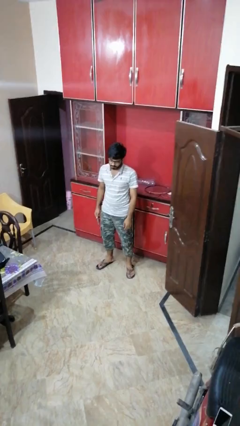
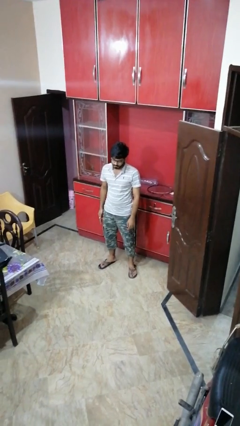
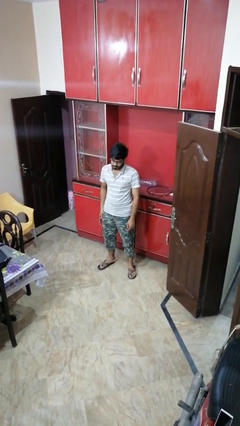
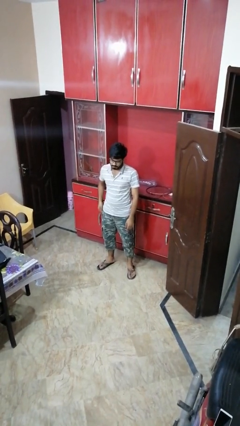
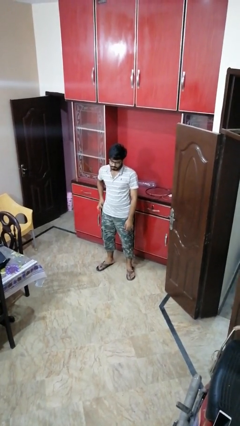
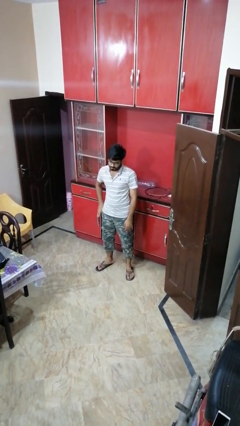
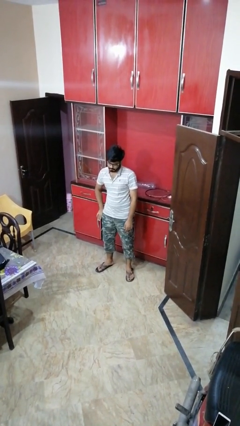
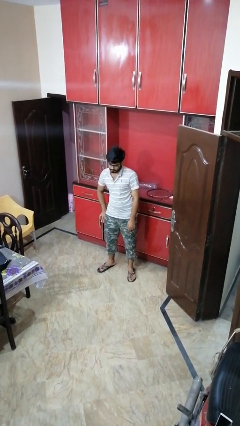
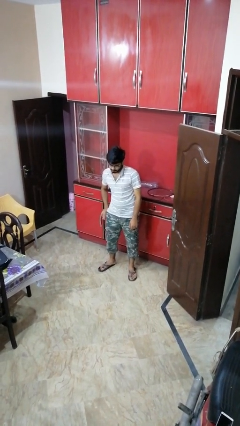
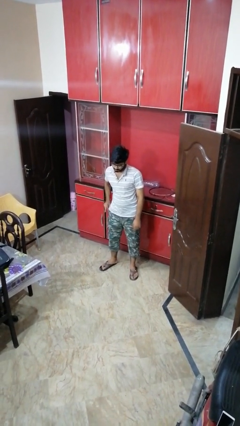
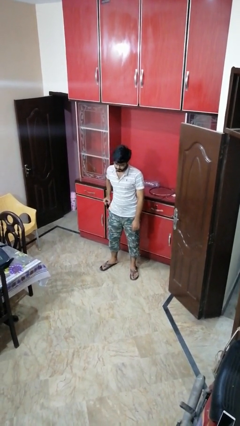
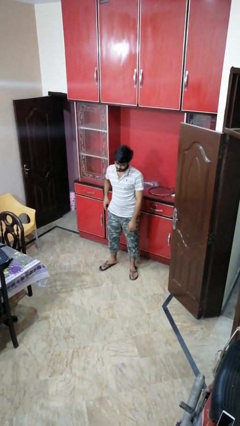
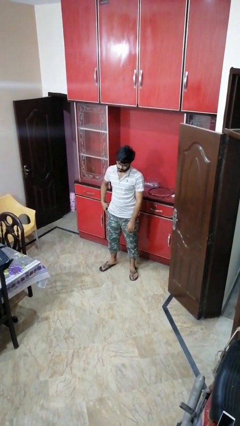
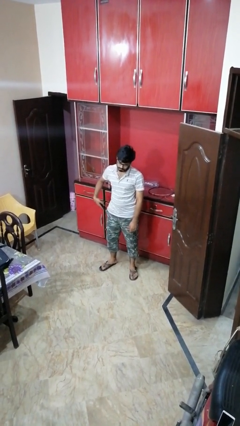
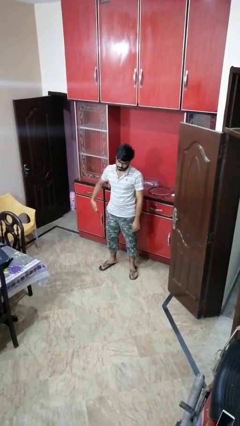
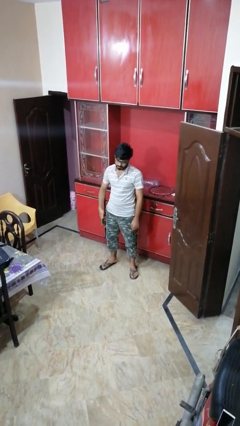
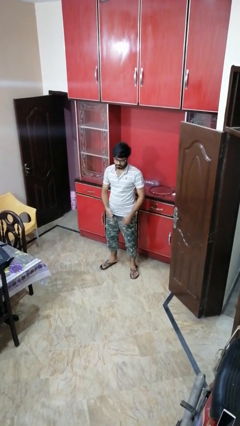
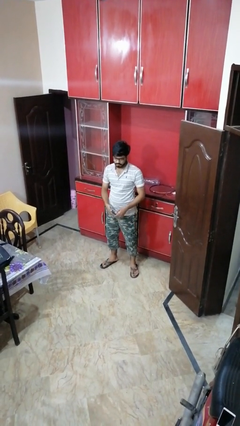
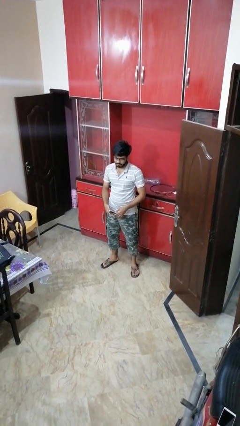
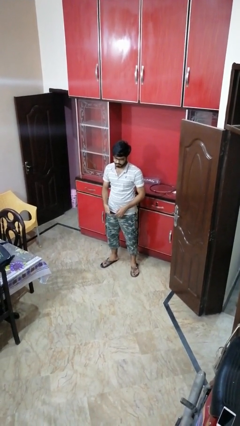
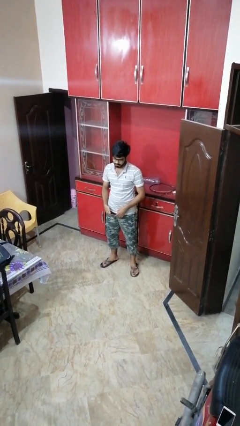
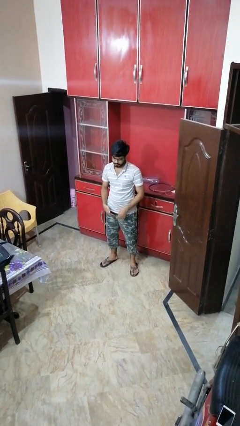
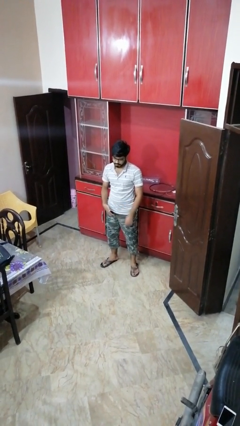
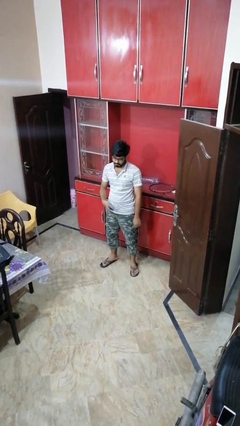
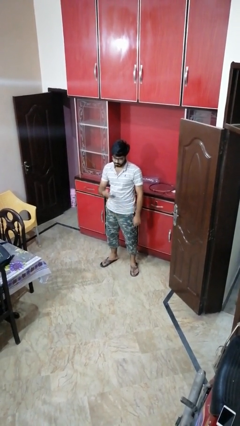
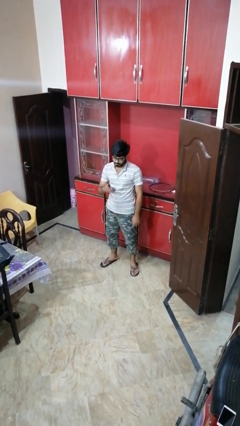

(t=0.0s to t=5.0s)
person takes phone from pocket

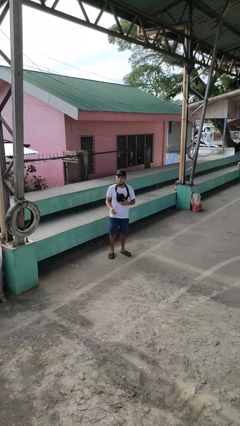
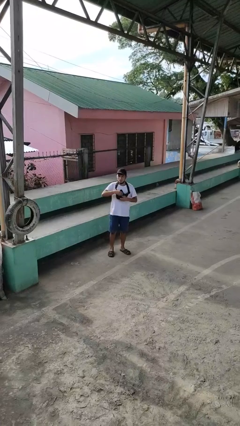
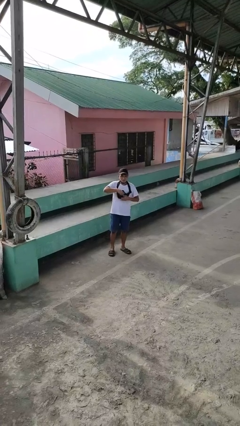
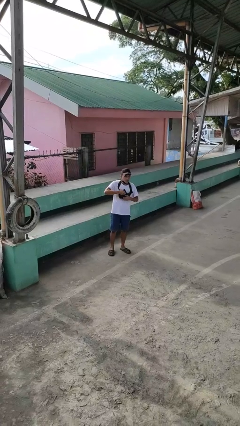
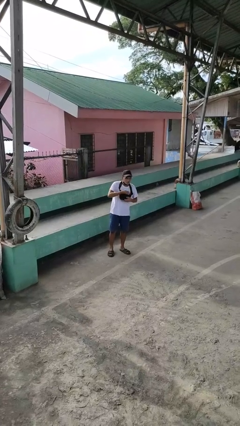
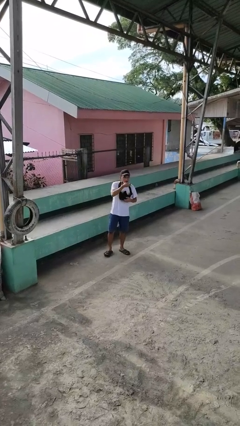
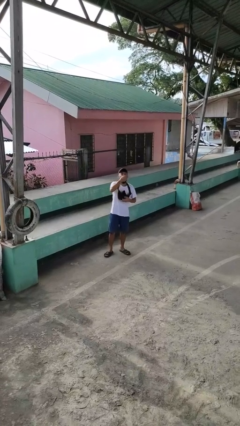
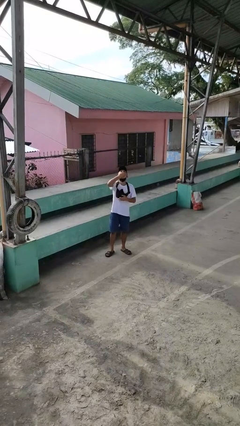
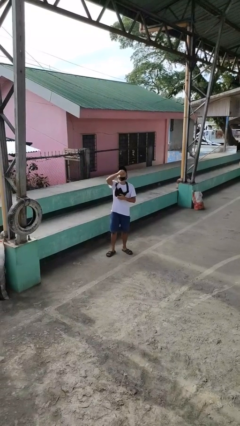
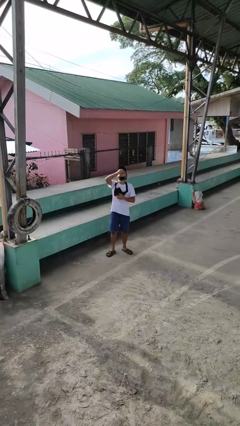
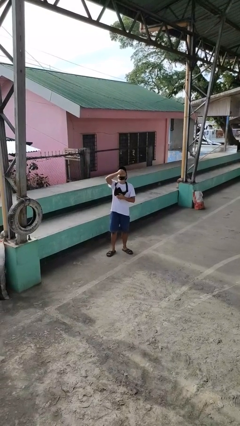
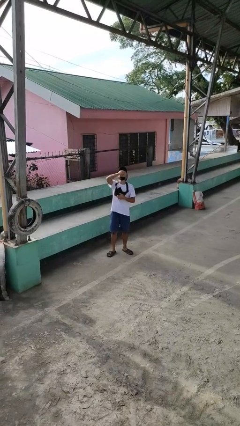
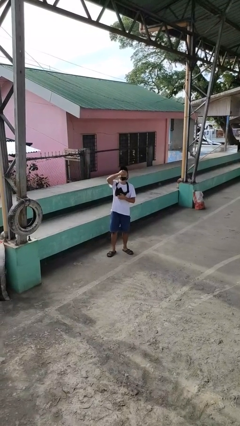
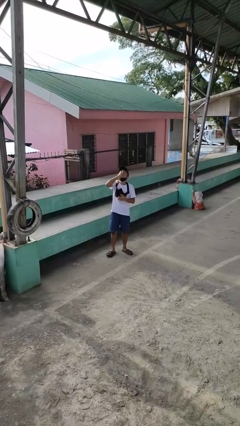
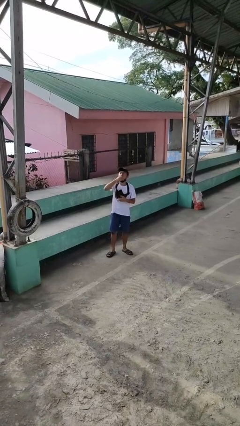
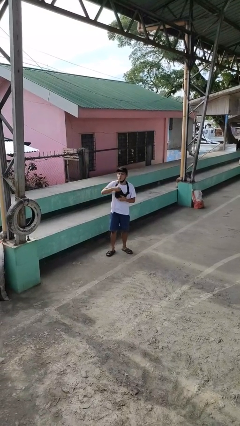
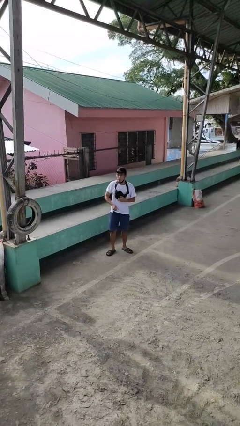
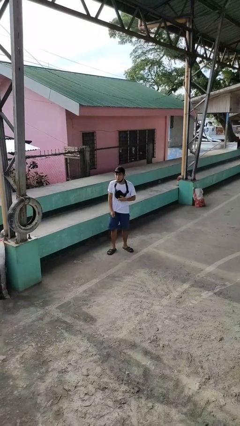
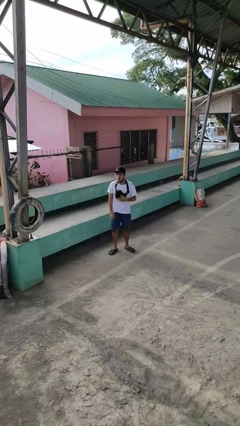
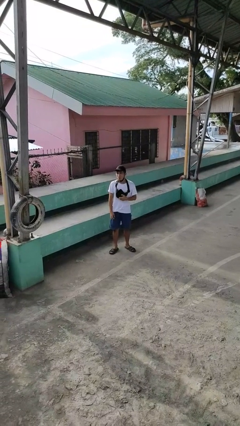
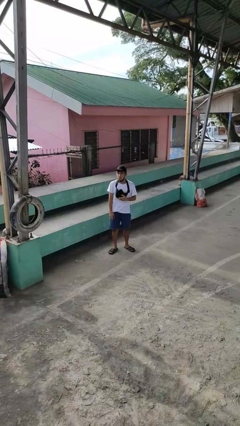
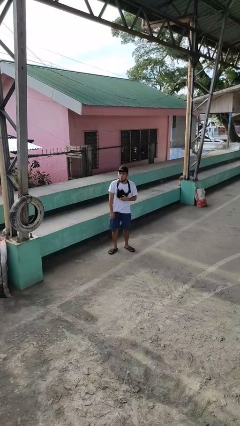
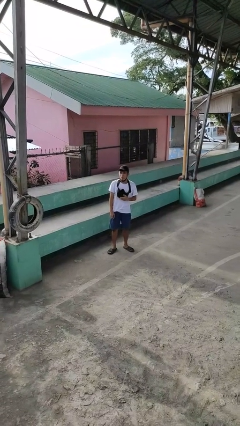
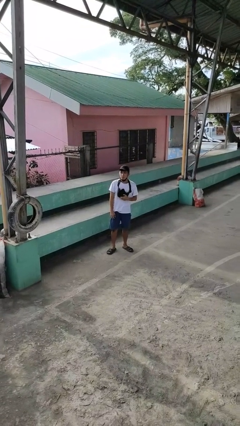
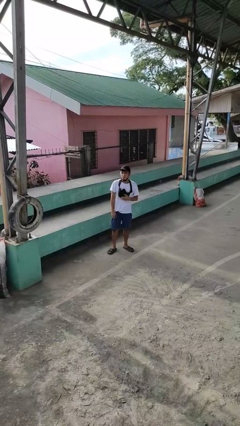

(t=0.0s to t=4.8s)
person eats snack from bag

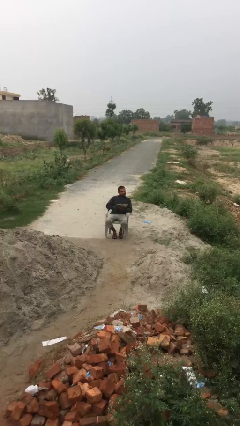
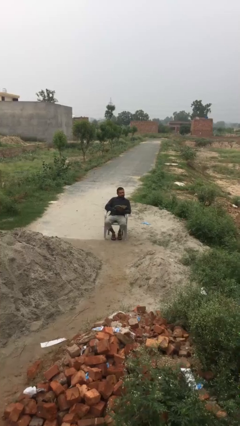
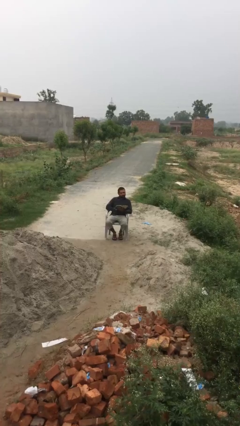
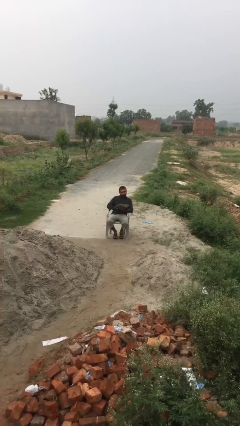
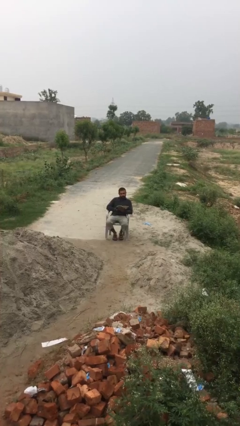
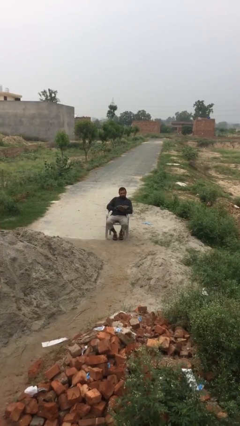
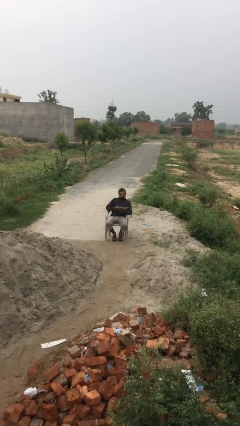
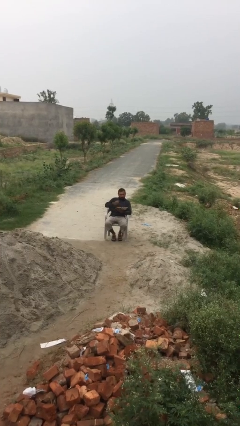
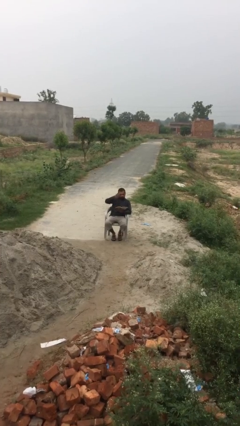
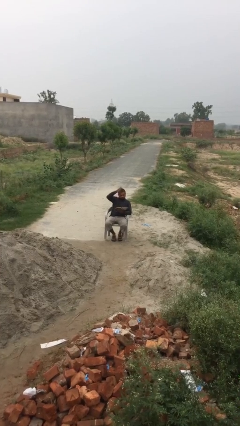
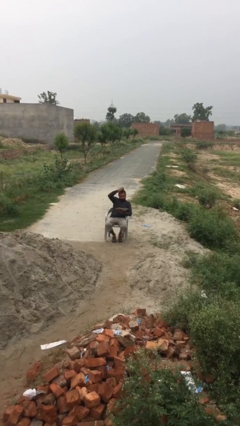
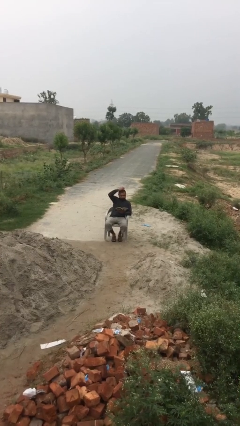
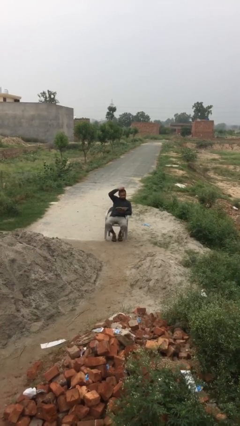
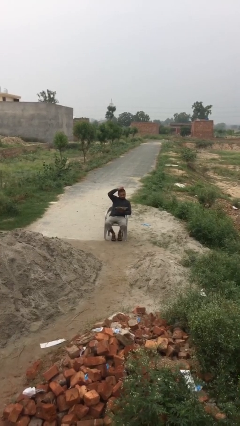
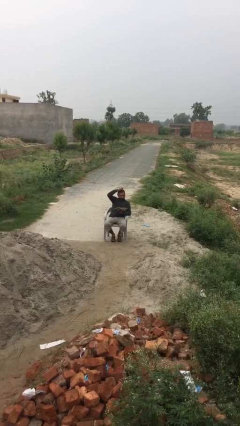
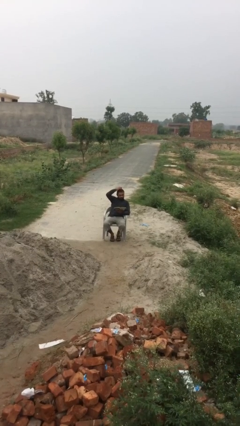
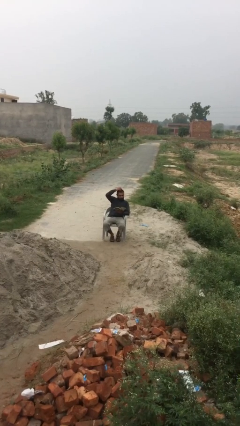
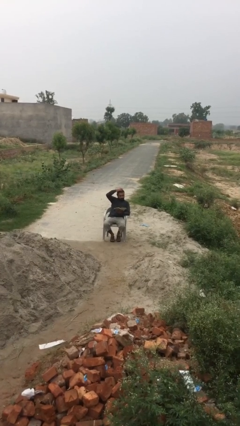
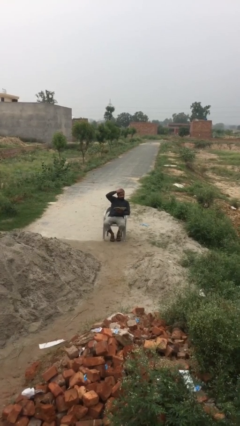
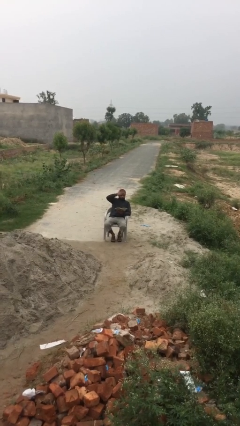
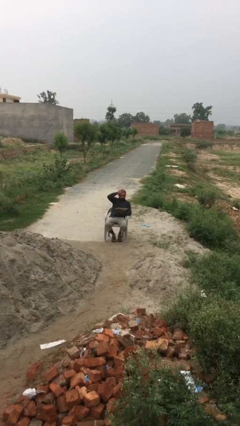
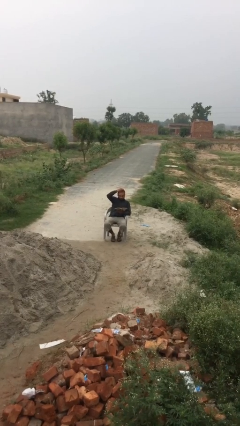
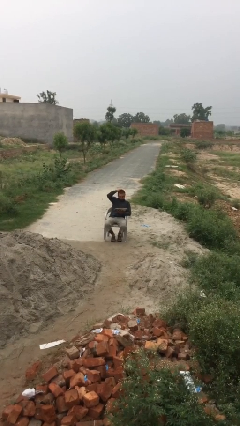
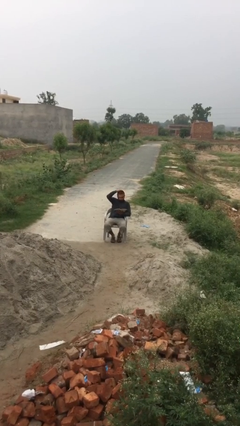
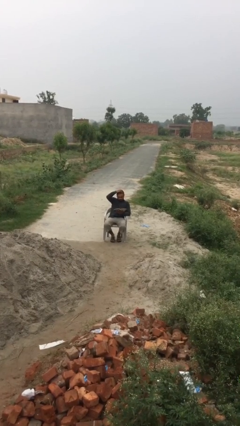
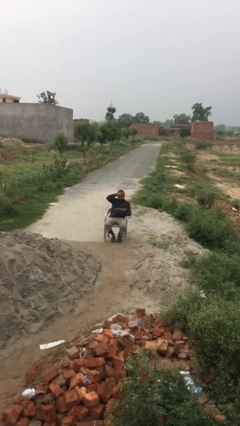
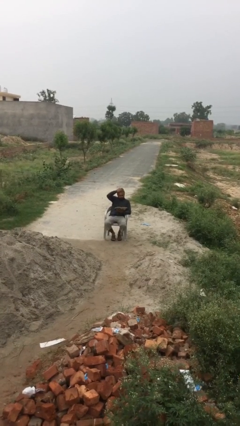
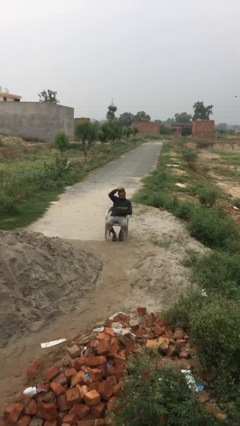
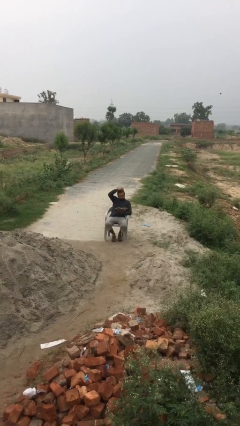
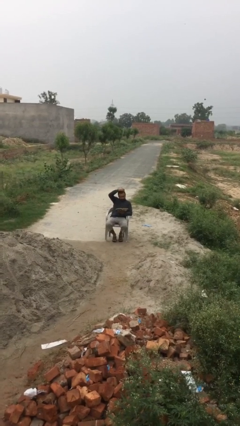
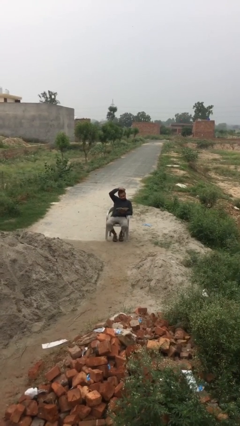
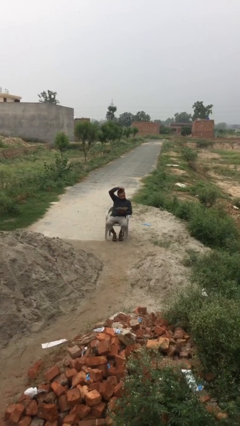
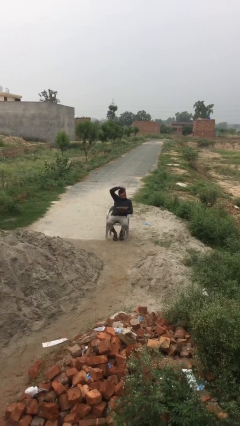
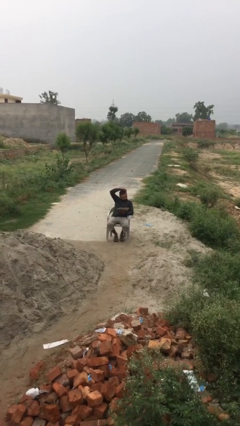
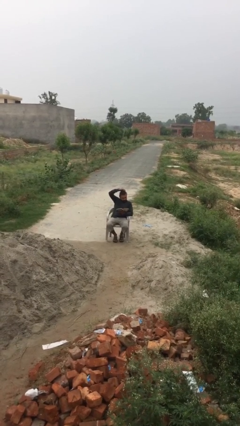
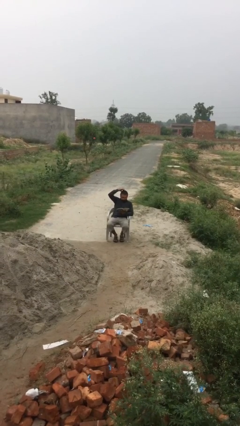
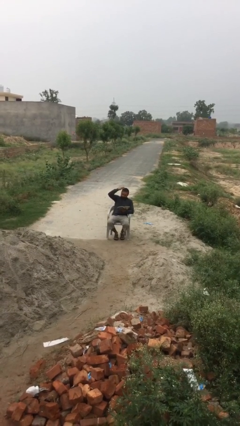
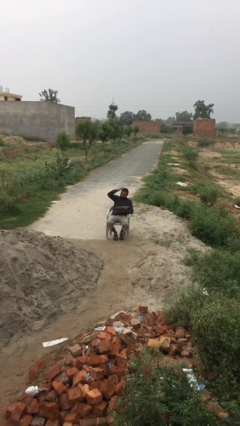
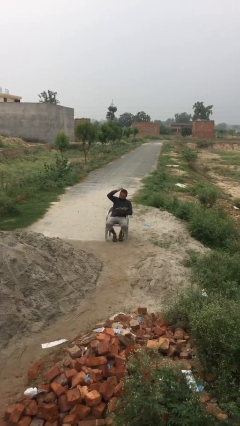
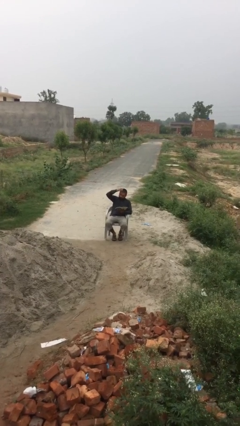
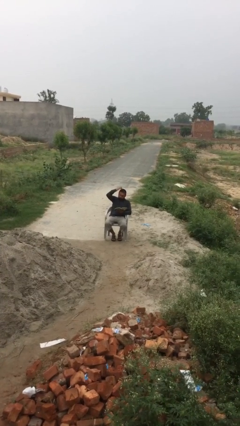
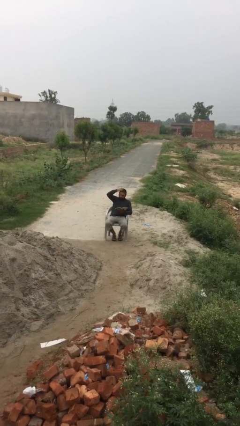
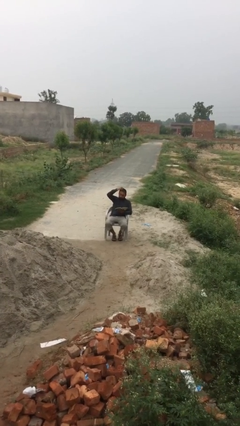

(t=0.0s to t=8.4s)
person reads document
